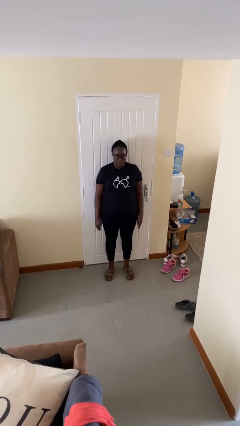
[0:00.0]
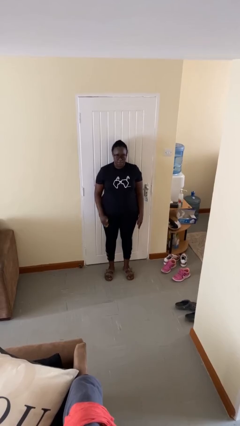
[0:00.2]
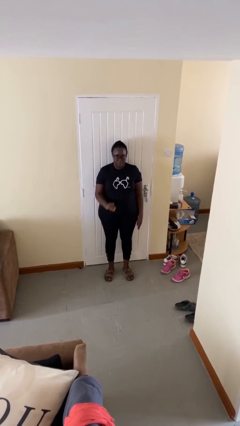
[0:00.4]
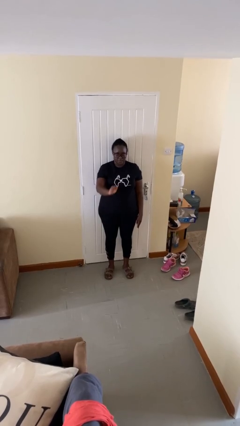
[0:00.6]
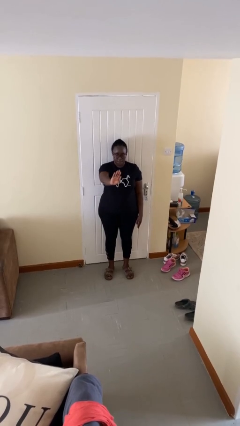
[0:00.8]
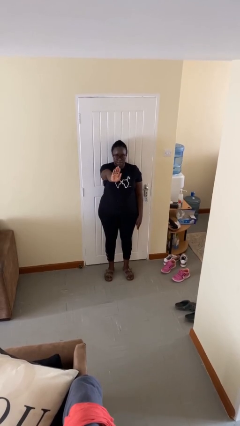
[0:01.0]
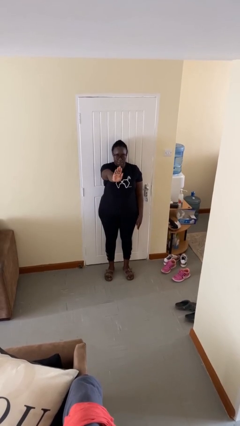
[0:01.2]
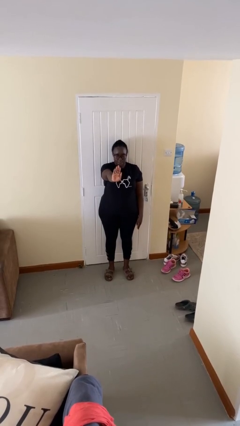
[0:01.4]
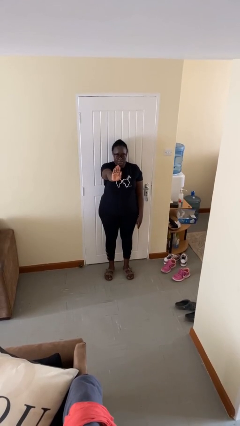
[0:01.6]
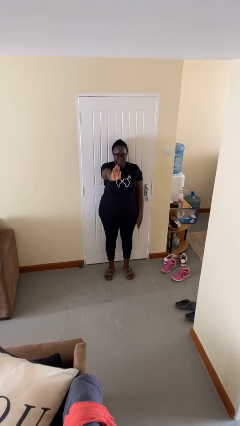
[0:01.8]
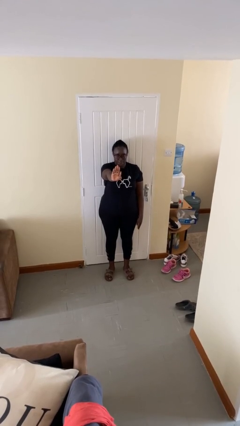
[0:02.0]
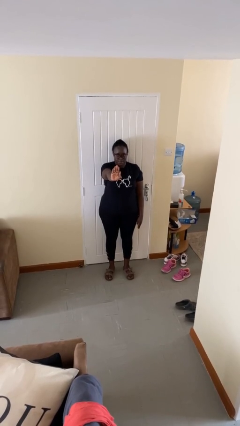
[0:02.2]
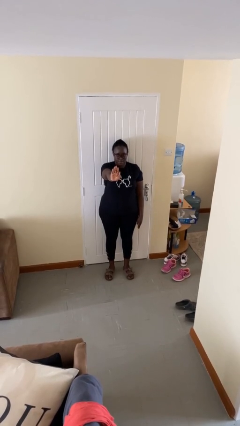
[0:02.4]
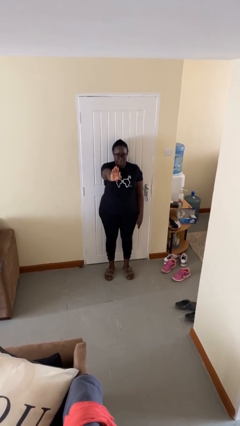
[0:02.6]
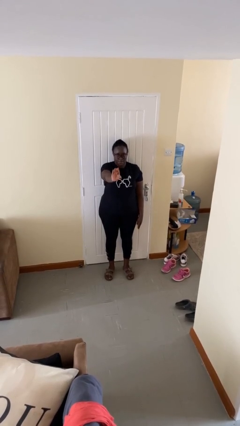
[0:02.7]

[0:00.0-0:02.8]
person gestures stop

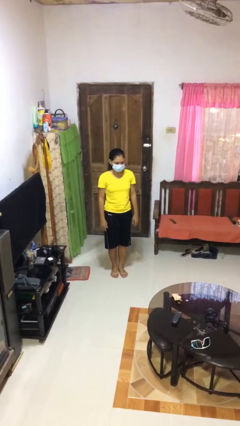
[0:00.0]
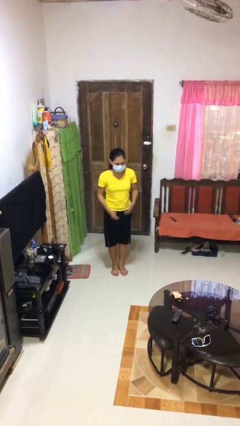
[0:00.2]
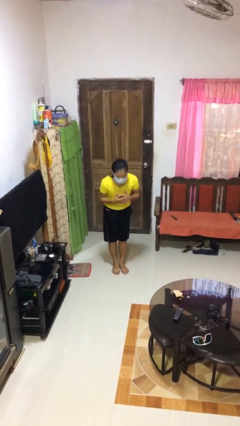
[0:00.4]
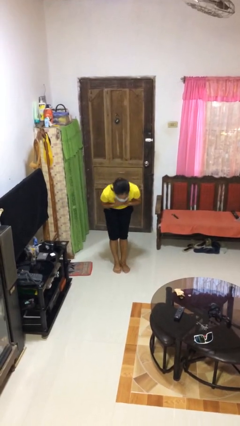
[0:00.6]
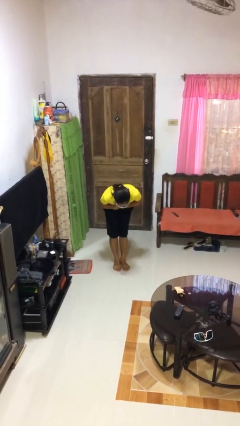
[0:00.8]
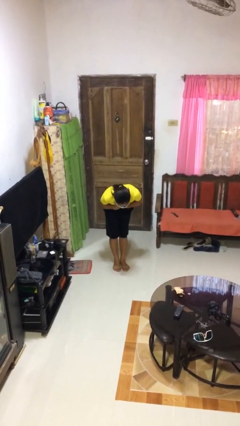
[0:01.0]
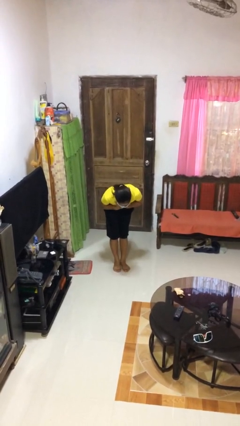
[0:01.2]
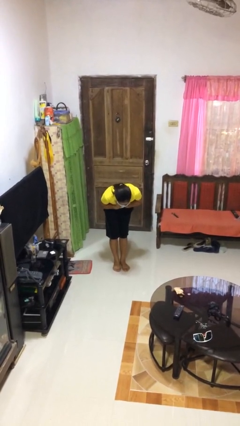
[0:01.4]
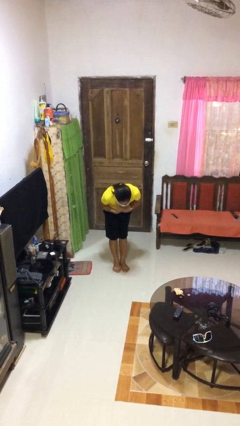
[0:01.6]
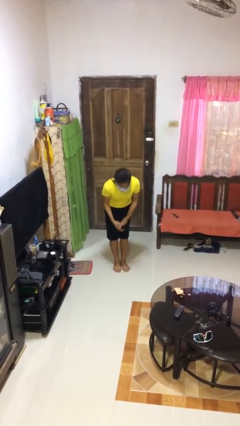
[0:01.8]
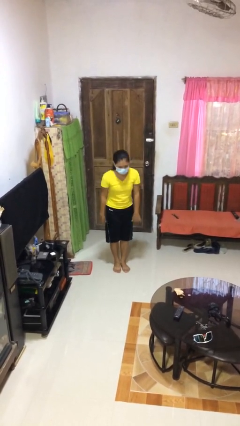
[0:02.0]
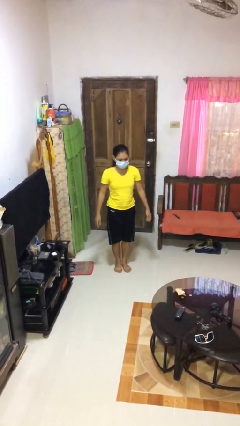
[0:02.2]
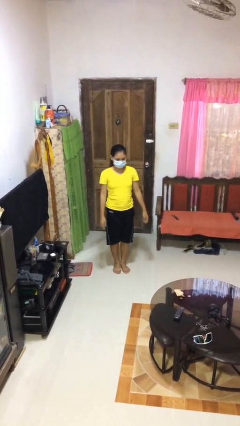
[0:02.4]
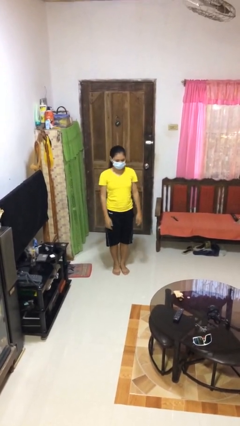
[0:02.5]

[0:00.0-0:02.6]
person bows

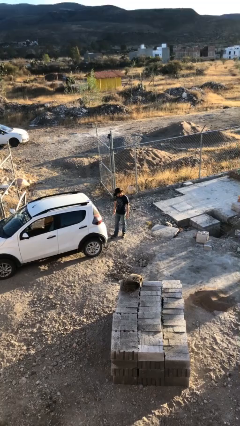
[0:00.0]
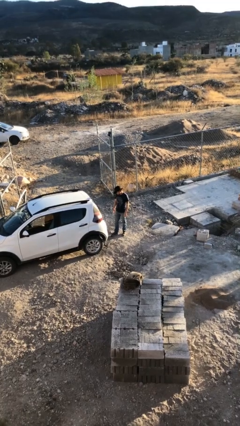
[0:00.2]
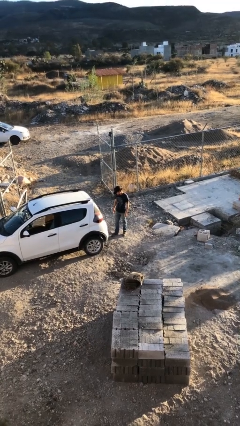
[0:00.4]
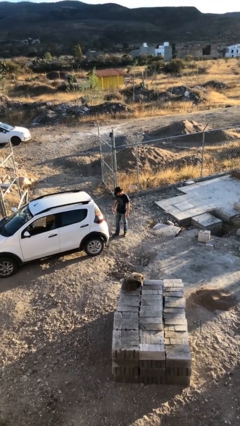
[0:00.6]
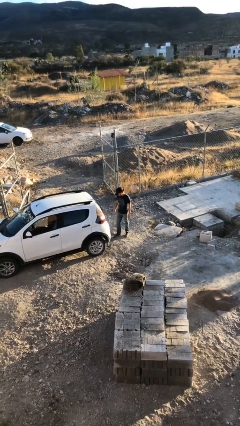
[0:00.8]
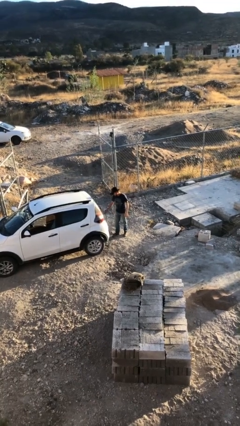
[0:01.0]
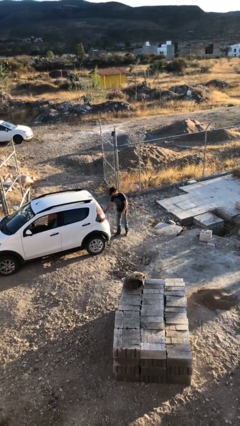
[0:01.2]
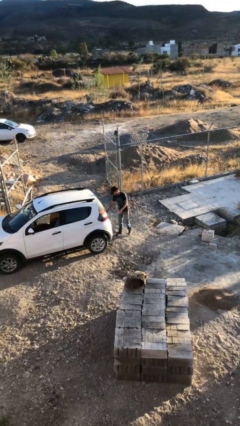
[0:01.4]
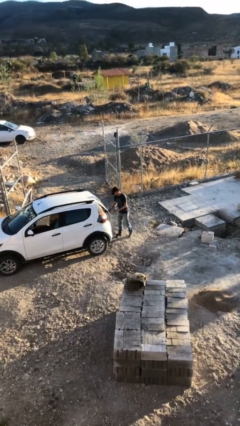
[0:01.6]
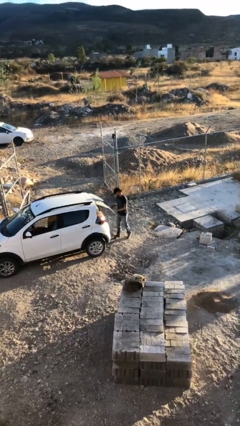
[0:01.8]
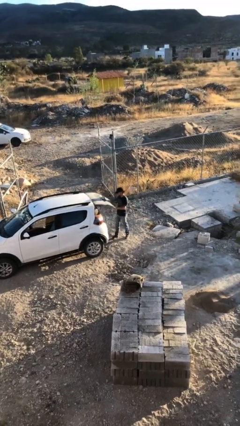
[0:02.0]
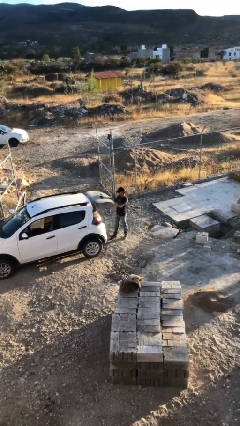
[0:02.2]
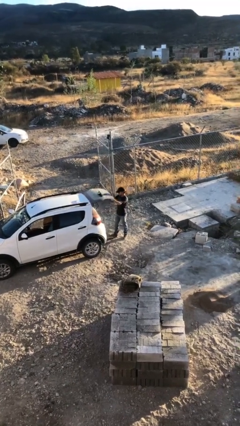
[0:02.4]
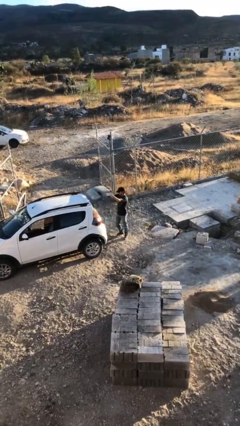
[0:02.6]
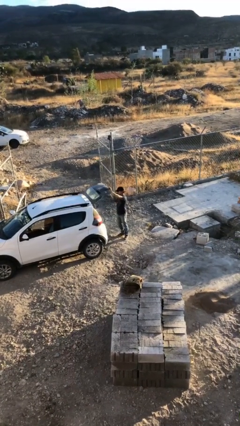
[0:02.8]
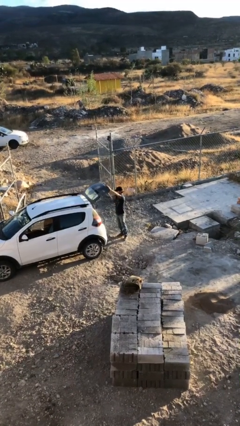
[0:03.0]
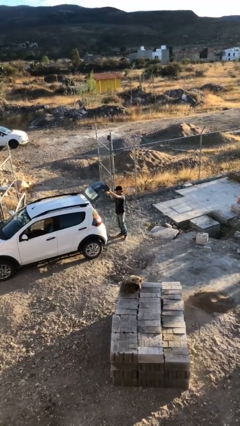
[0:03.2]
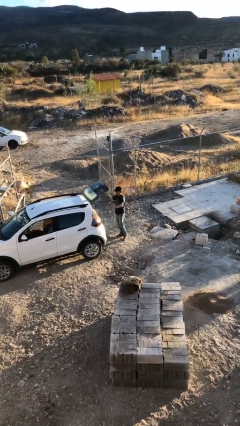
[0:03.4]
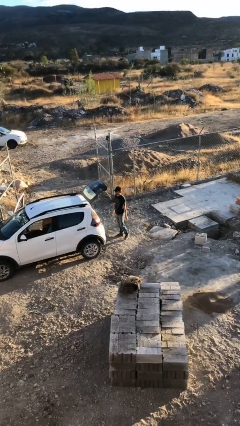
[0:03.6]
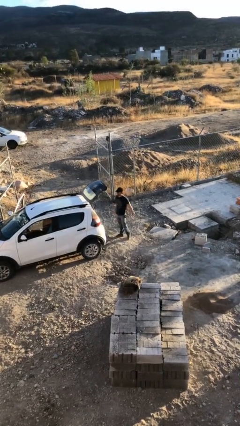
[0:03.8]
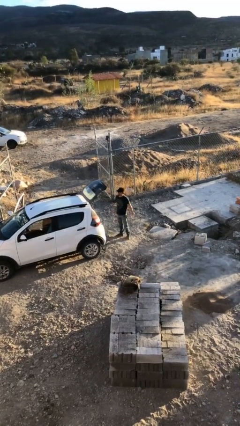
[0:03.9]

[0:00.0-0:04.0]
person opens car trunk

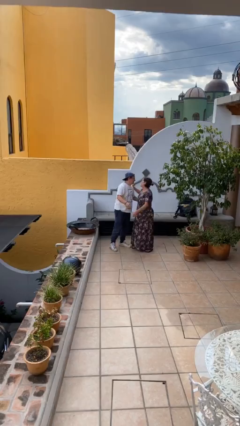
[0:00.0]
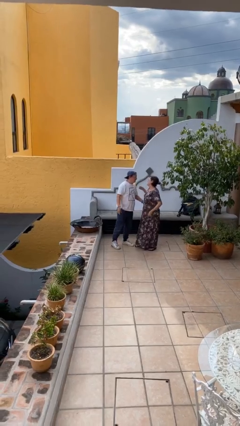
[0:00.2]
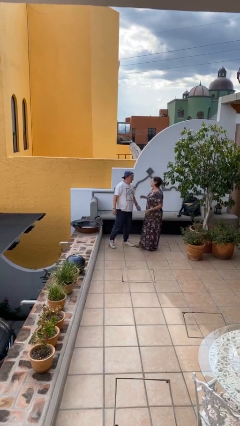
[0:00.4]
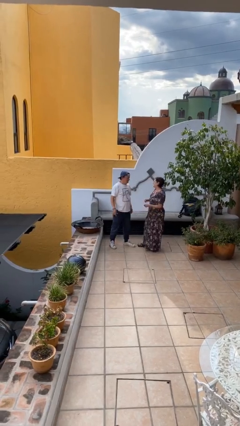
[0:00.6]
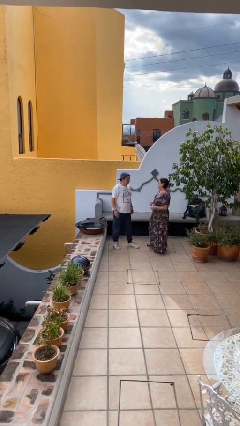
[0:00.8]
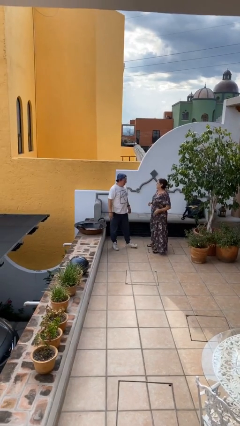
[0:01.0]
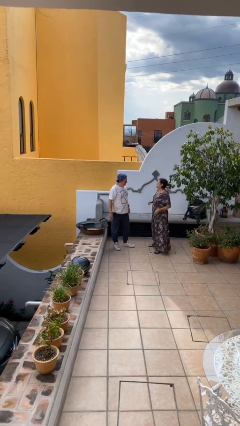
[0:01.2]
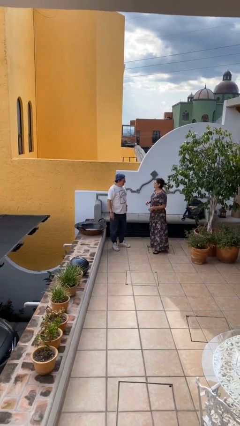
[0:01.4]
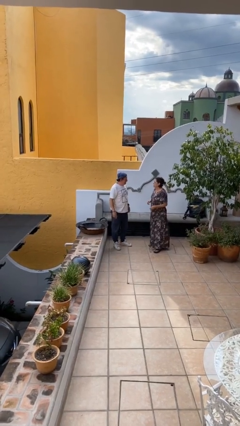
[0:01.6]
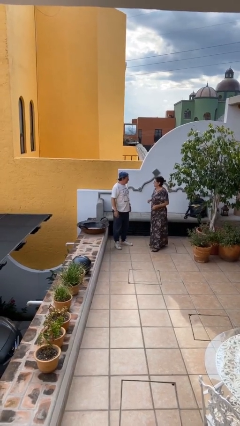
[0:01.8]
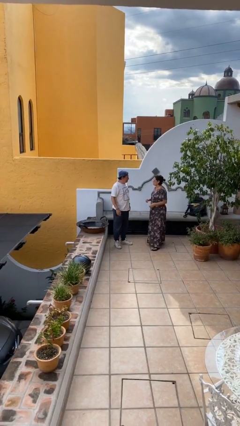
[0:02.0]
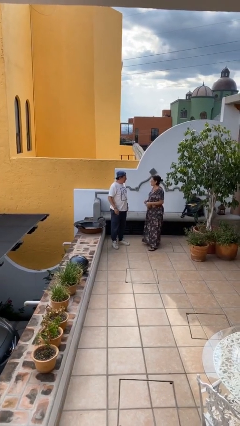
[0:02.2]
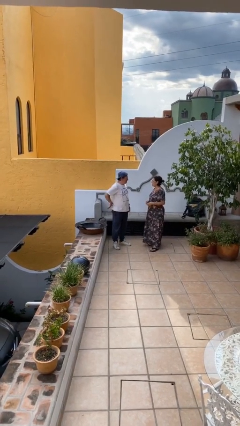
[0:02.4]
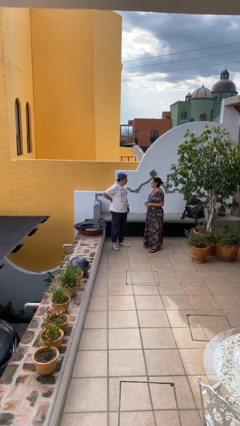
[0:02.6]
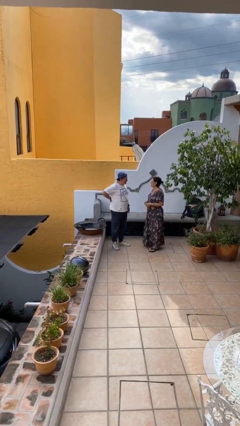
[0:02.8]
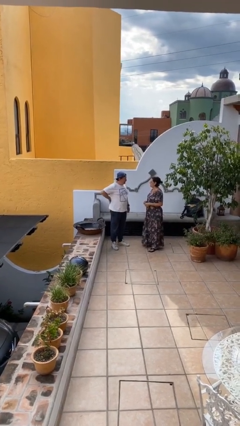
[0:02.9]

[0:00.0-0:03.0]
person talks to person

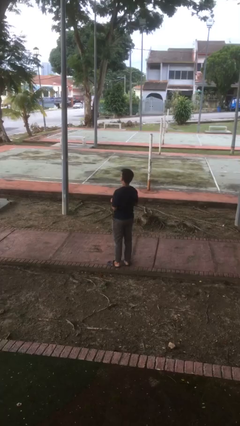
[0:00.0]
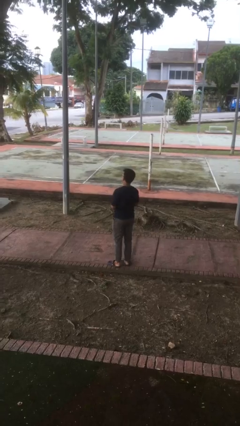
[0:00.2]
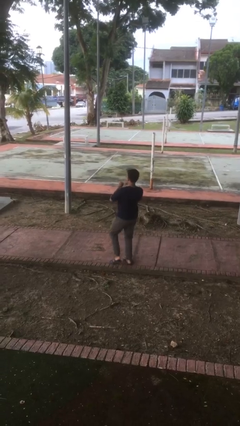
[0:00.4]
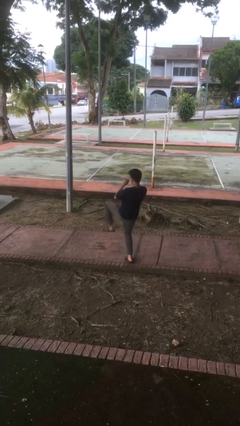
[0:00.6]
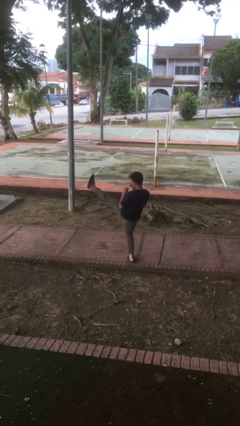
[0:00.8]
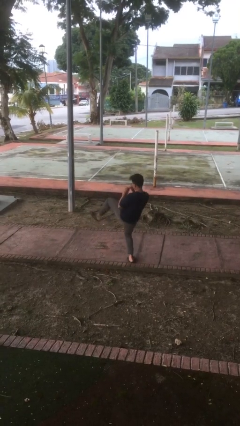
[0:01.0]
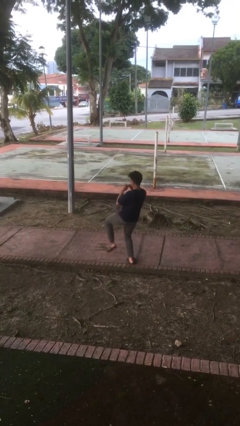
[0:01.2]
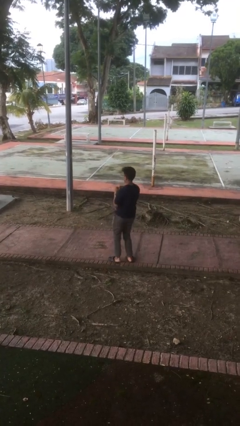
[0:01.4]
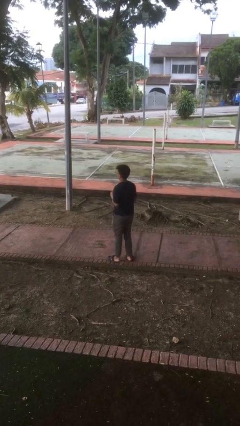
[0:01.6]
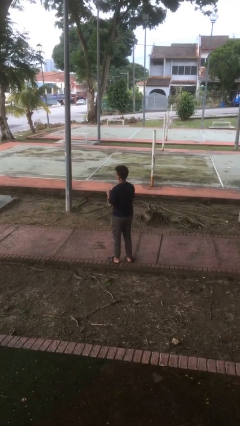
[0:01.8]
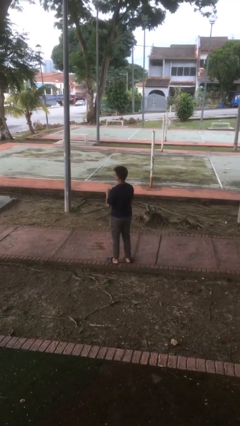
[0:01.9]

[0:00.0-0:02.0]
person karate kicks

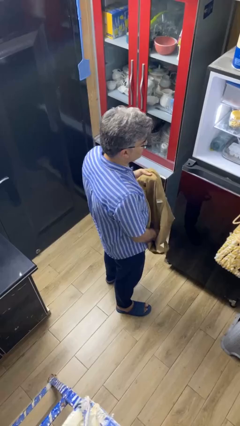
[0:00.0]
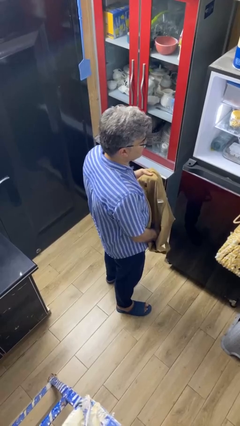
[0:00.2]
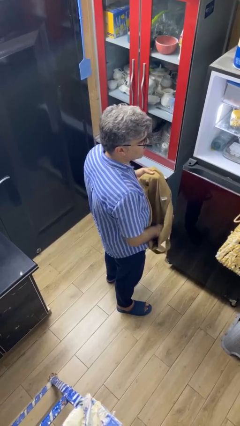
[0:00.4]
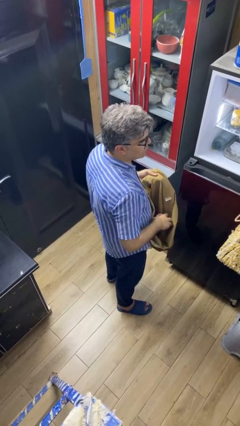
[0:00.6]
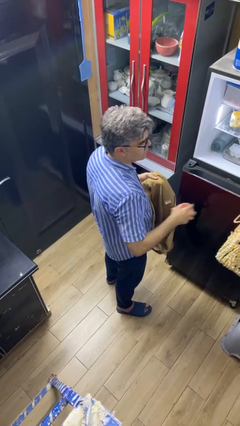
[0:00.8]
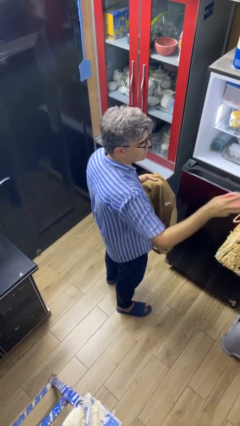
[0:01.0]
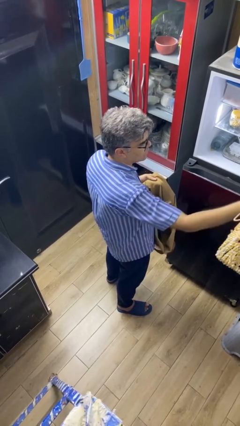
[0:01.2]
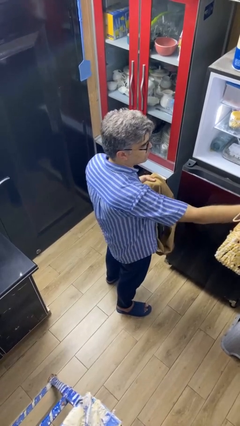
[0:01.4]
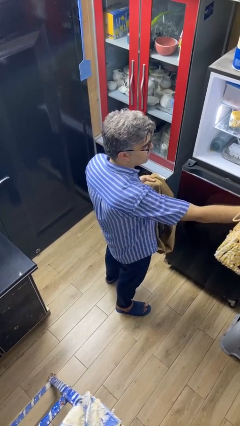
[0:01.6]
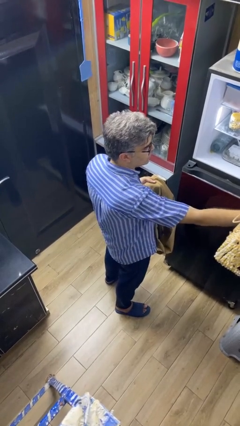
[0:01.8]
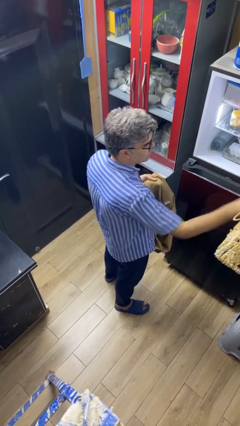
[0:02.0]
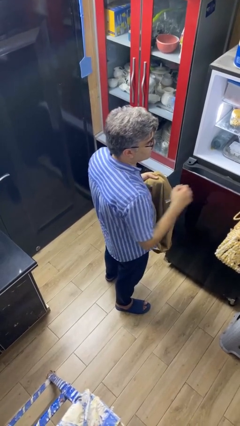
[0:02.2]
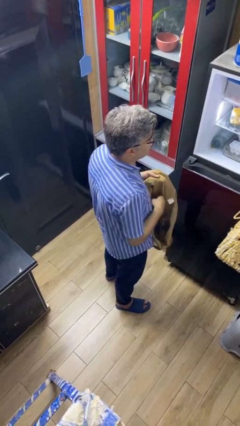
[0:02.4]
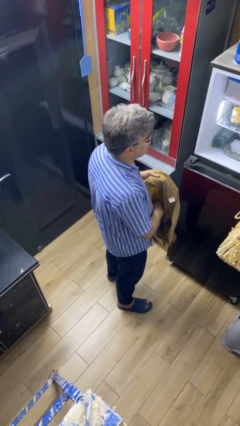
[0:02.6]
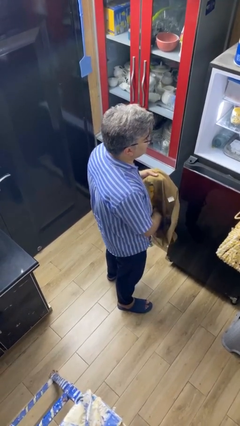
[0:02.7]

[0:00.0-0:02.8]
person loads groceries into refrigerator

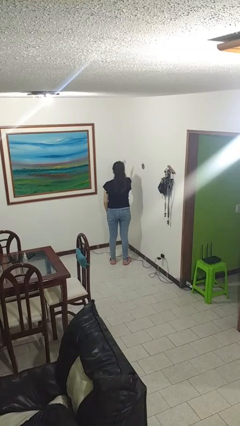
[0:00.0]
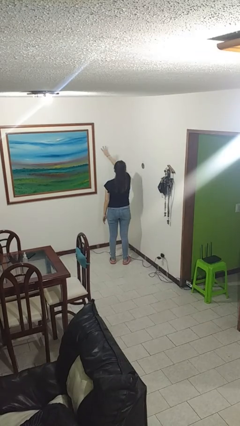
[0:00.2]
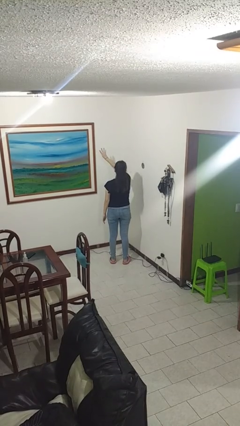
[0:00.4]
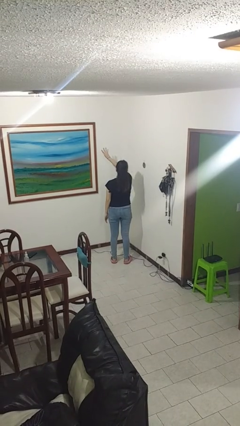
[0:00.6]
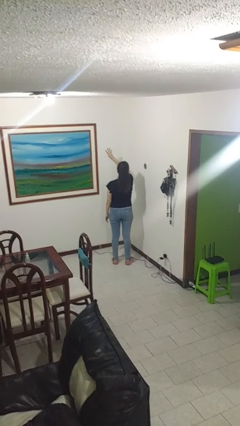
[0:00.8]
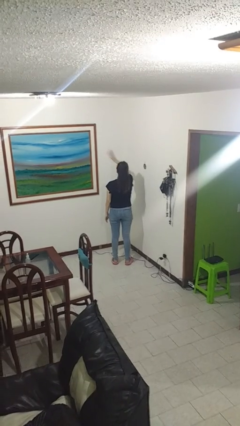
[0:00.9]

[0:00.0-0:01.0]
person gestures number four
